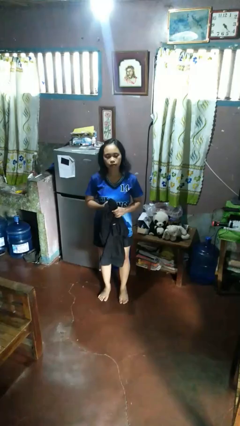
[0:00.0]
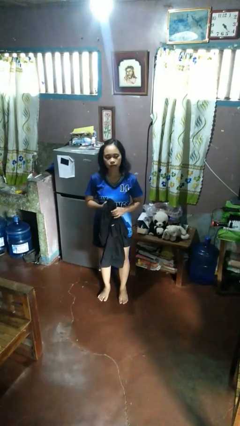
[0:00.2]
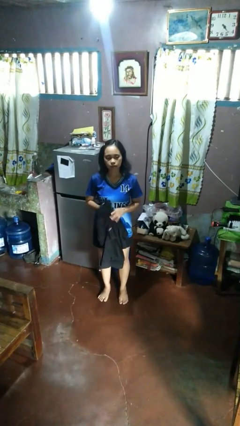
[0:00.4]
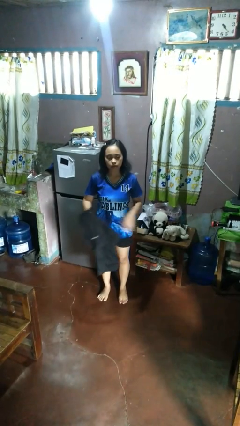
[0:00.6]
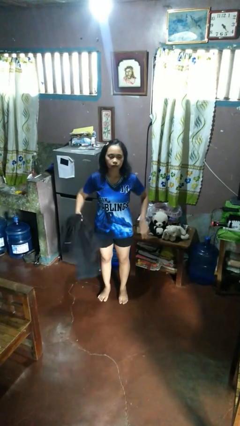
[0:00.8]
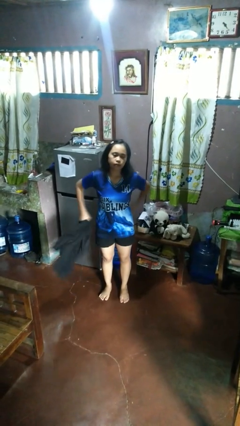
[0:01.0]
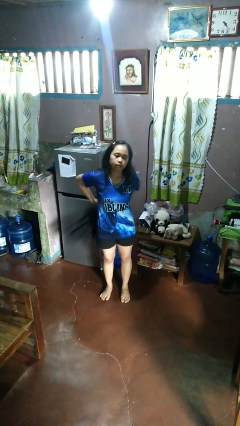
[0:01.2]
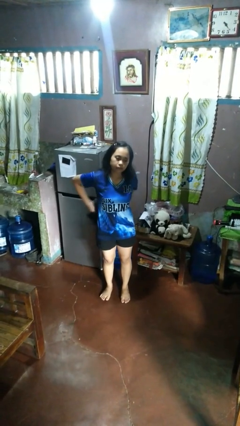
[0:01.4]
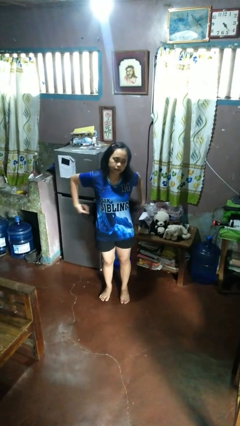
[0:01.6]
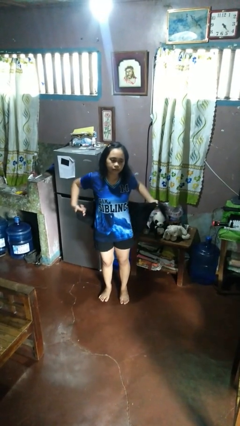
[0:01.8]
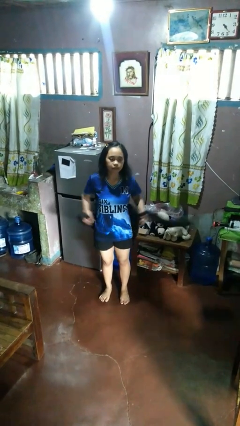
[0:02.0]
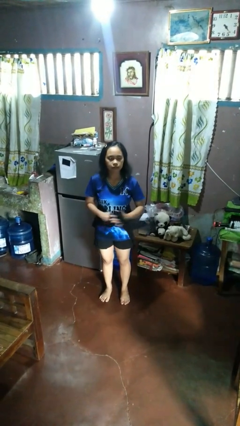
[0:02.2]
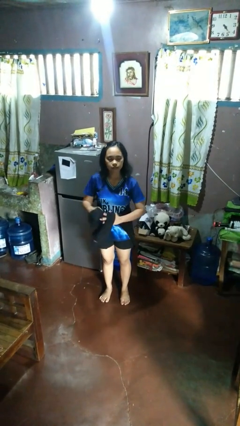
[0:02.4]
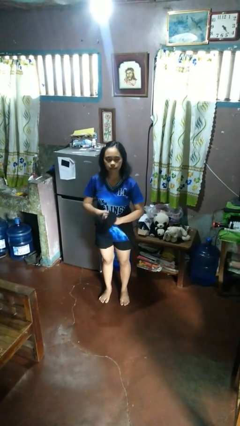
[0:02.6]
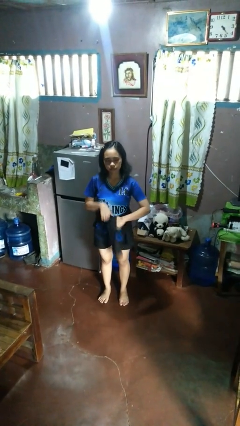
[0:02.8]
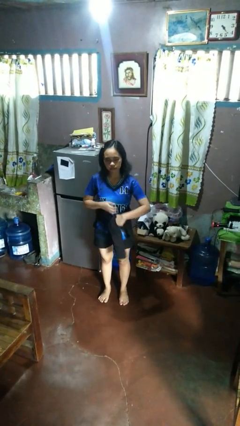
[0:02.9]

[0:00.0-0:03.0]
person ties jacket around waist

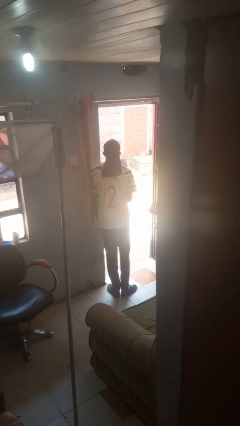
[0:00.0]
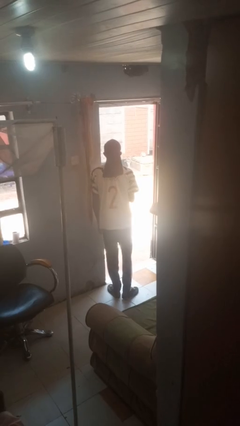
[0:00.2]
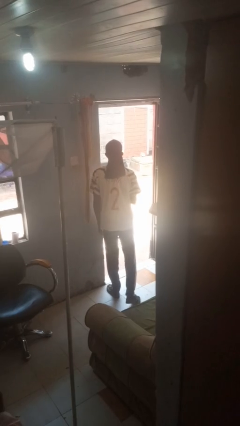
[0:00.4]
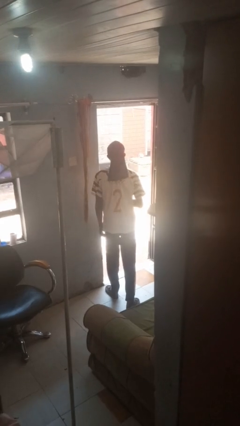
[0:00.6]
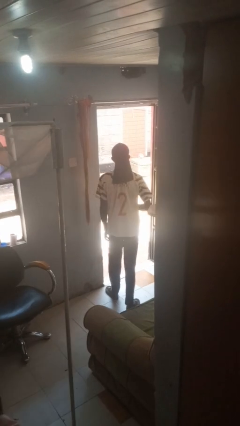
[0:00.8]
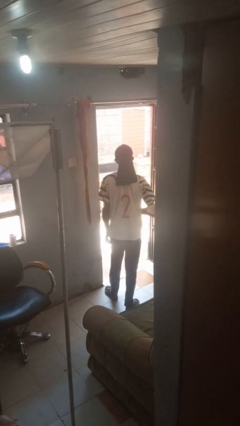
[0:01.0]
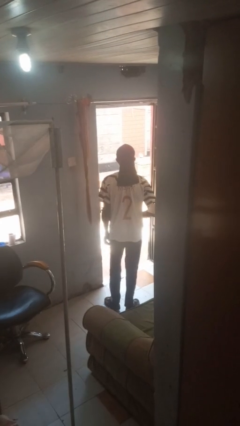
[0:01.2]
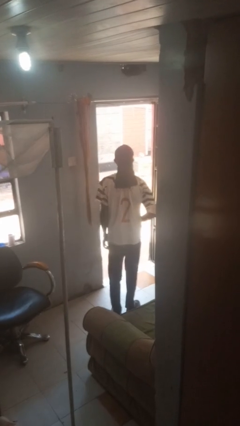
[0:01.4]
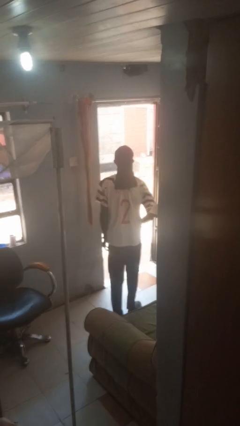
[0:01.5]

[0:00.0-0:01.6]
person bumps into wall

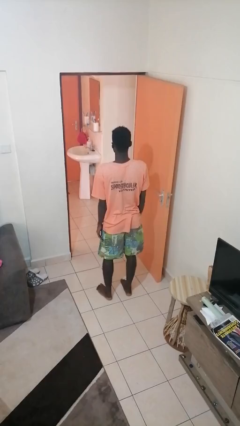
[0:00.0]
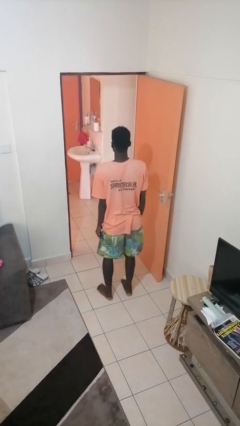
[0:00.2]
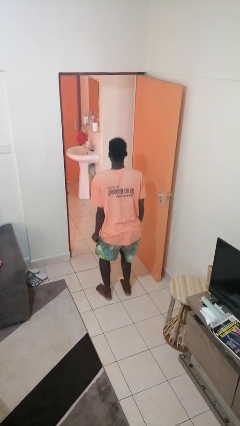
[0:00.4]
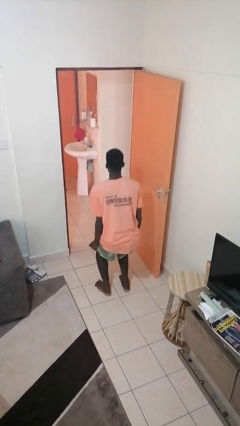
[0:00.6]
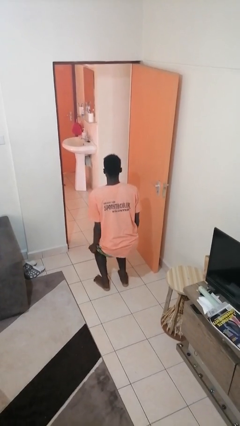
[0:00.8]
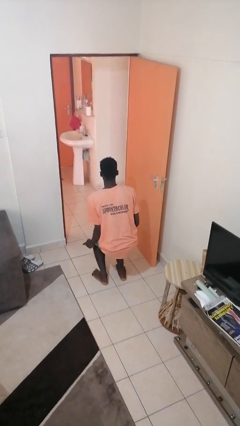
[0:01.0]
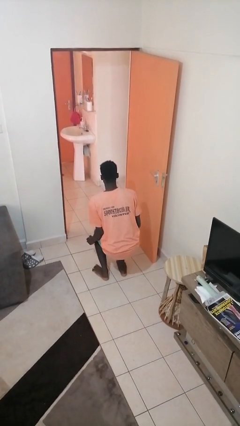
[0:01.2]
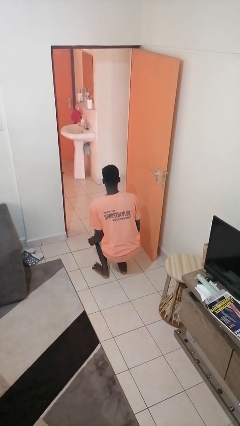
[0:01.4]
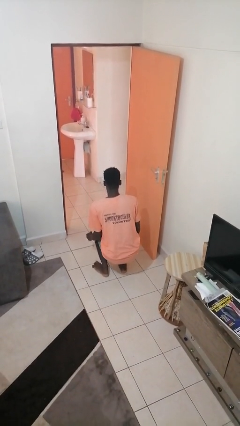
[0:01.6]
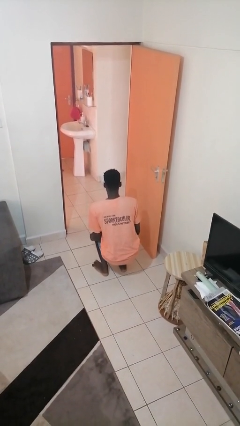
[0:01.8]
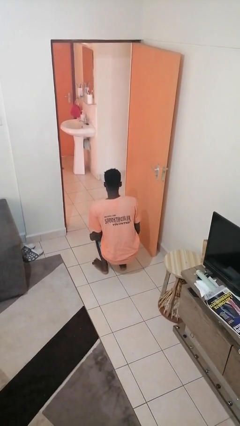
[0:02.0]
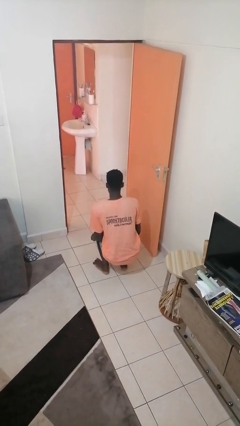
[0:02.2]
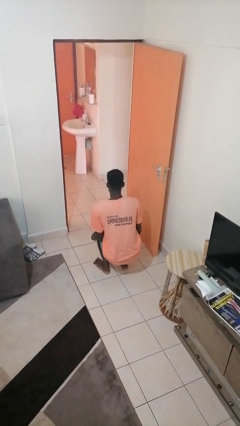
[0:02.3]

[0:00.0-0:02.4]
person squats

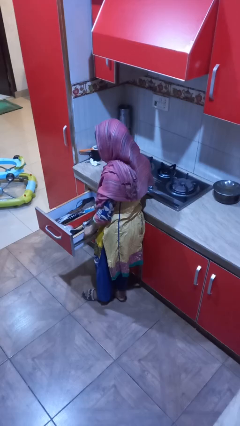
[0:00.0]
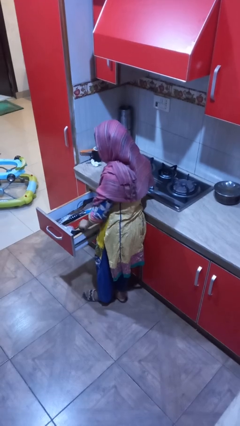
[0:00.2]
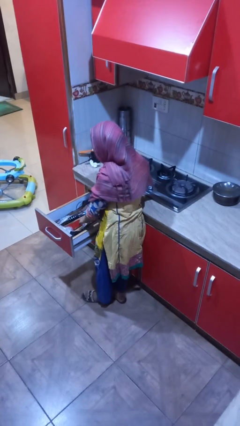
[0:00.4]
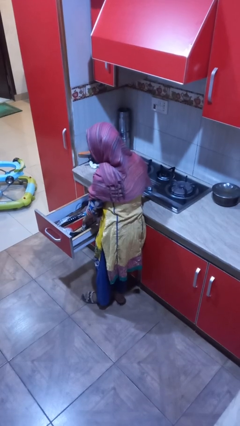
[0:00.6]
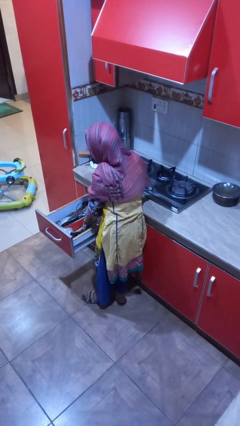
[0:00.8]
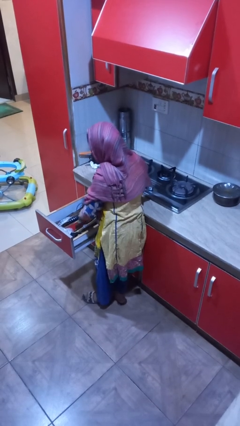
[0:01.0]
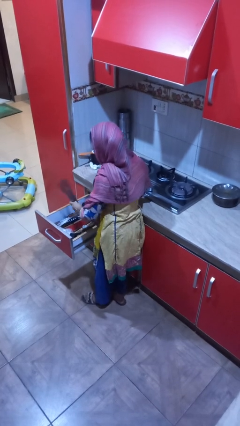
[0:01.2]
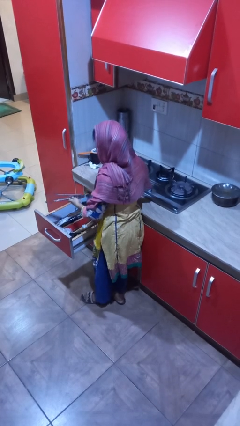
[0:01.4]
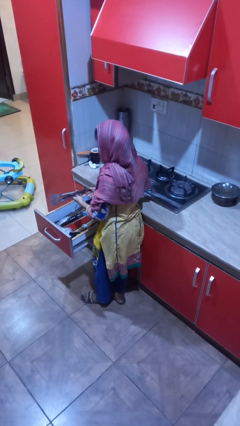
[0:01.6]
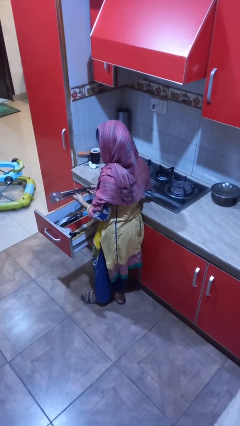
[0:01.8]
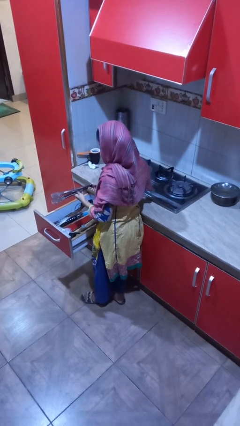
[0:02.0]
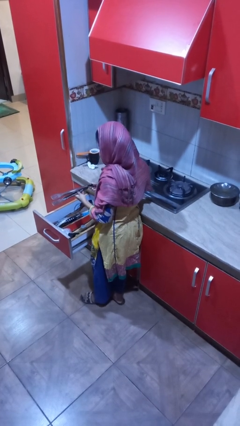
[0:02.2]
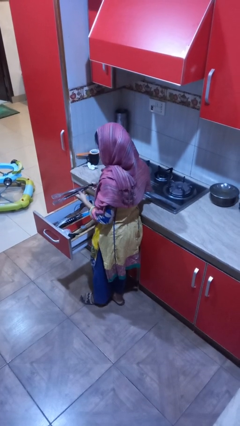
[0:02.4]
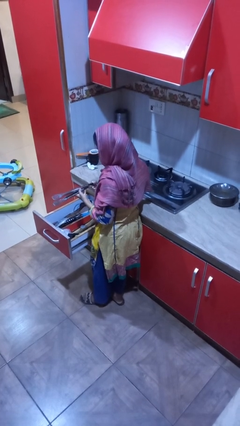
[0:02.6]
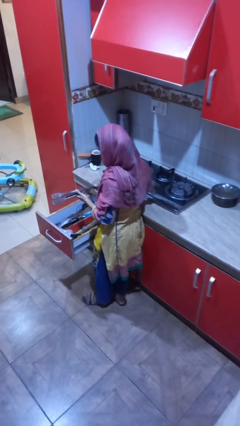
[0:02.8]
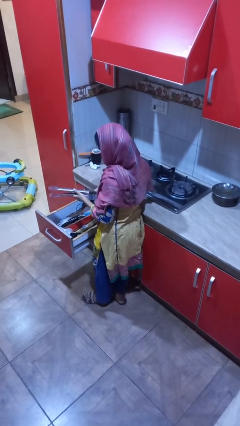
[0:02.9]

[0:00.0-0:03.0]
person takes object from kitchen drawer

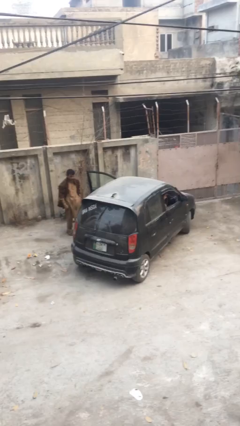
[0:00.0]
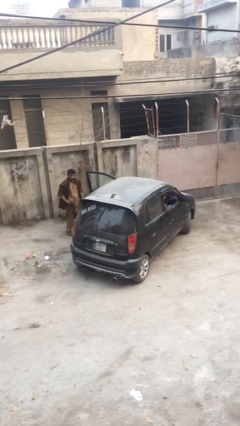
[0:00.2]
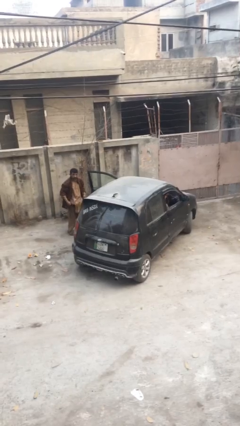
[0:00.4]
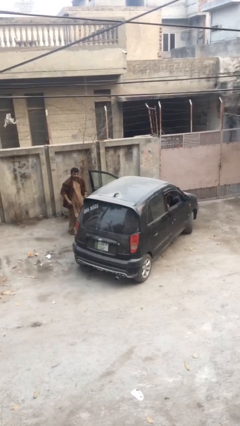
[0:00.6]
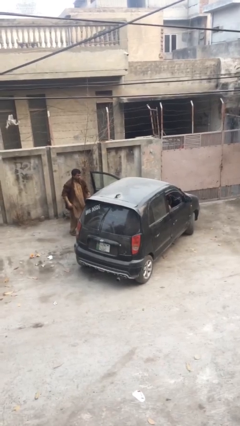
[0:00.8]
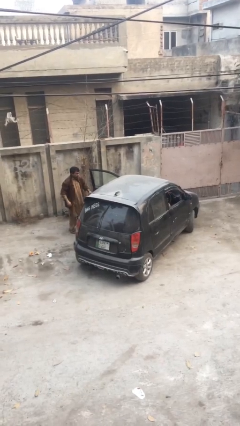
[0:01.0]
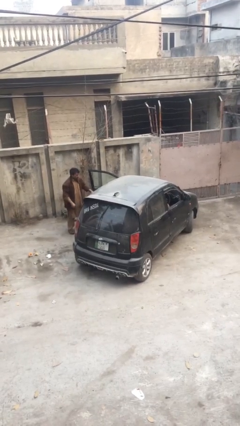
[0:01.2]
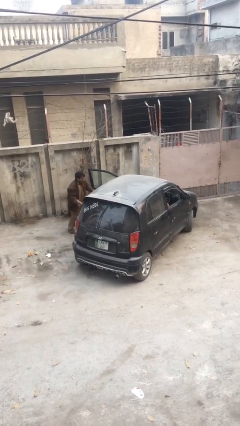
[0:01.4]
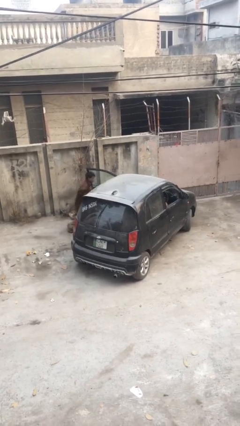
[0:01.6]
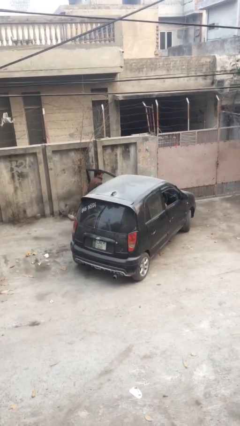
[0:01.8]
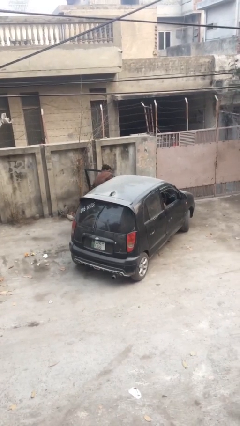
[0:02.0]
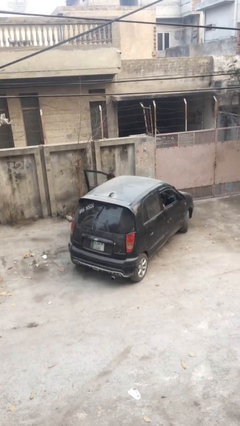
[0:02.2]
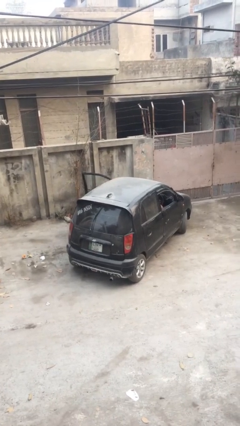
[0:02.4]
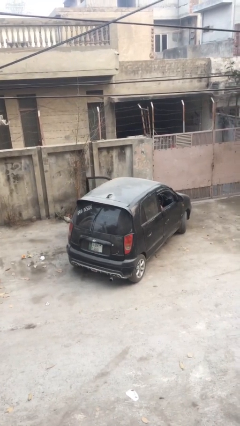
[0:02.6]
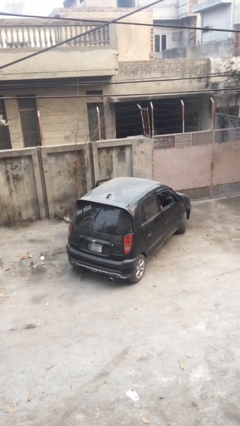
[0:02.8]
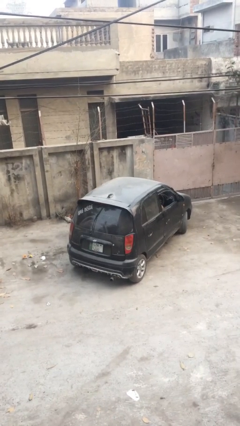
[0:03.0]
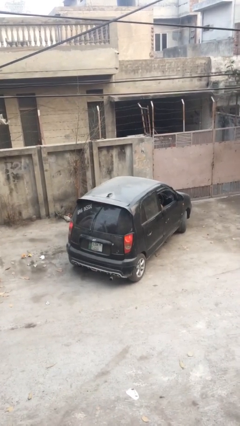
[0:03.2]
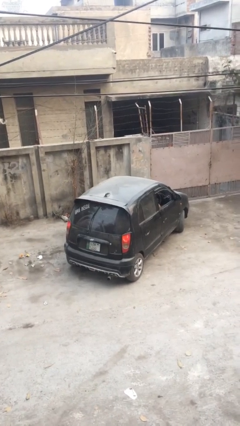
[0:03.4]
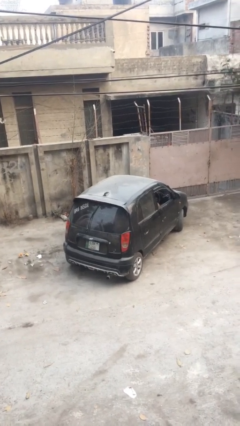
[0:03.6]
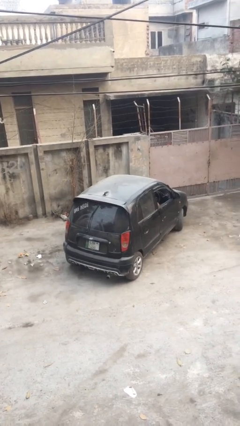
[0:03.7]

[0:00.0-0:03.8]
car picks up person

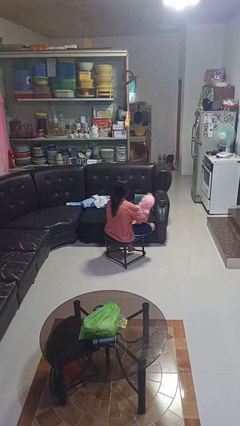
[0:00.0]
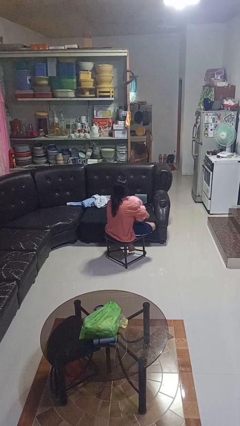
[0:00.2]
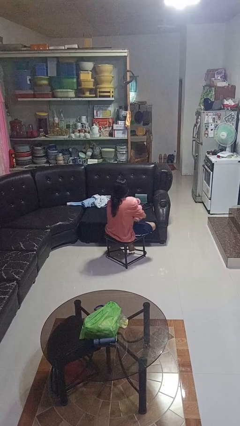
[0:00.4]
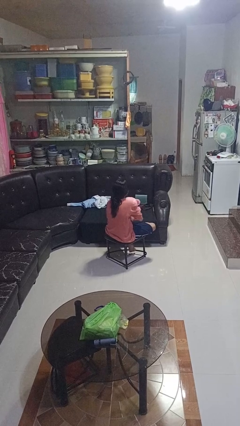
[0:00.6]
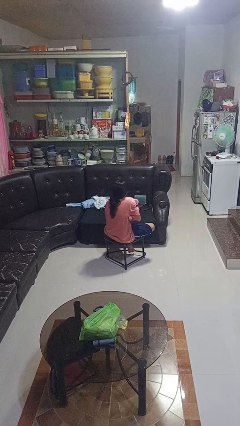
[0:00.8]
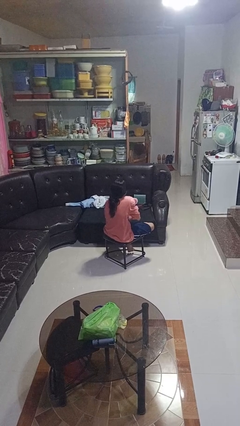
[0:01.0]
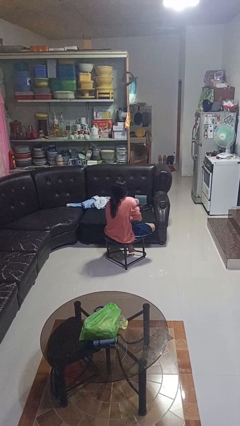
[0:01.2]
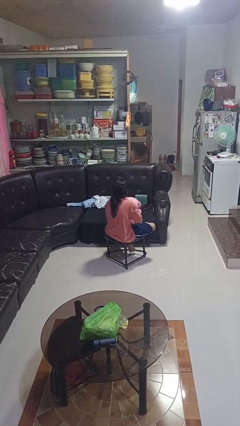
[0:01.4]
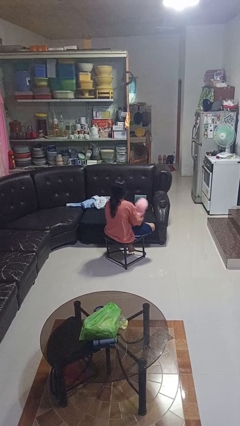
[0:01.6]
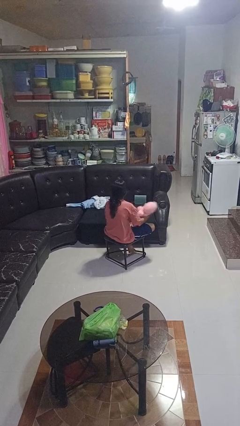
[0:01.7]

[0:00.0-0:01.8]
person hugs stuffed animal

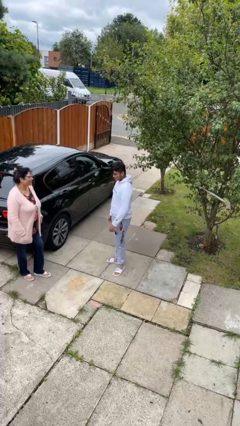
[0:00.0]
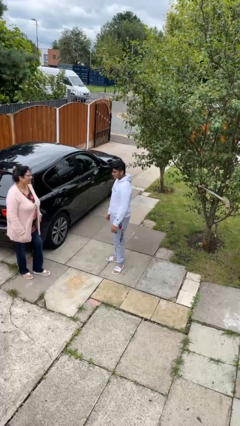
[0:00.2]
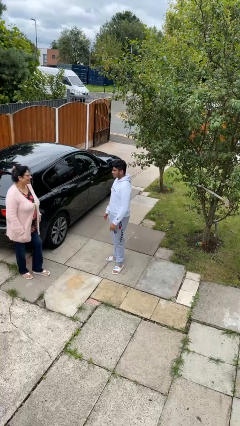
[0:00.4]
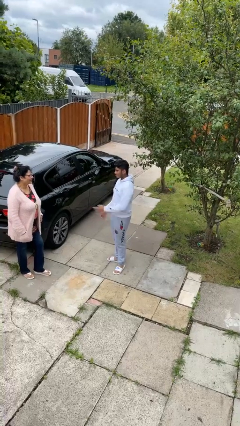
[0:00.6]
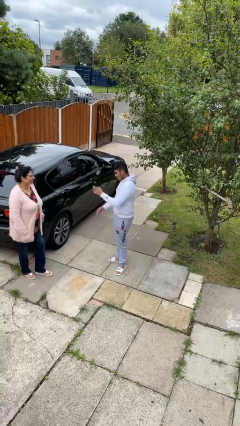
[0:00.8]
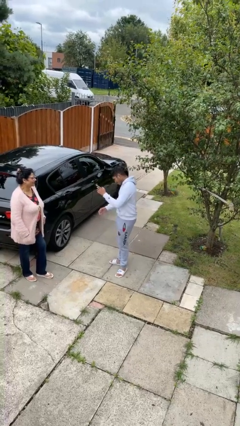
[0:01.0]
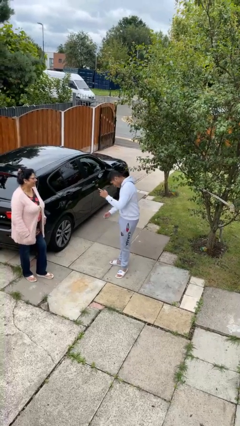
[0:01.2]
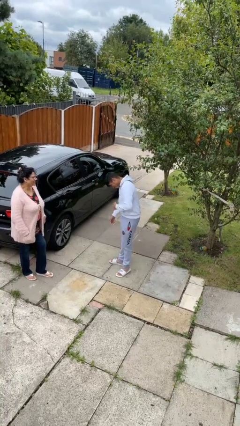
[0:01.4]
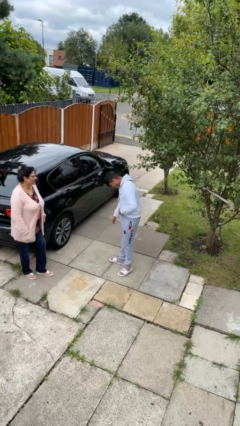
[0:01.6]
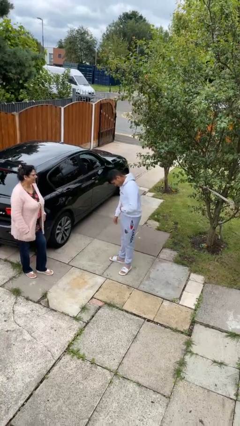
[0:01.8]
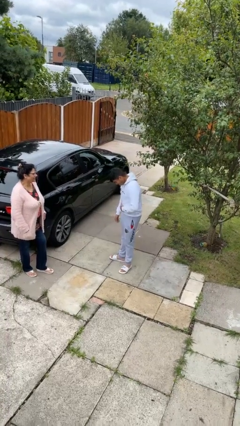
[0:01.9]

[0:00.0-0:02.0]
person laughs with person
